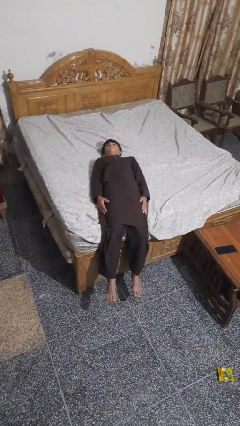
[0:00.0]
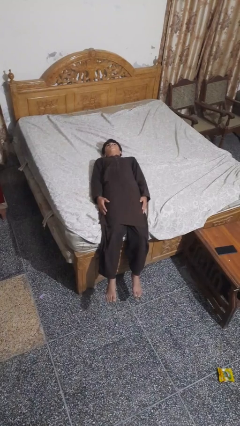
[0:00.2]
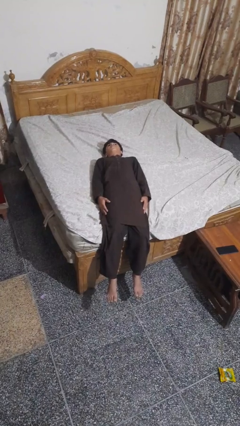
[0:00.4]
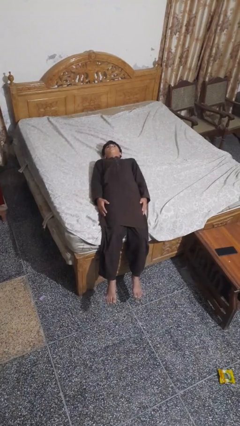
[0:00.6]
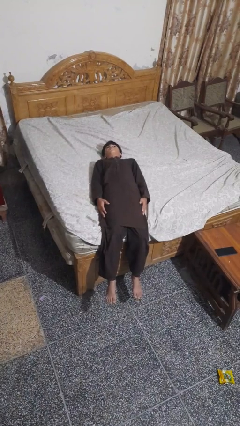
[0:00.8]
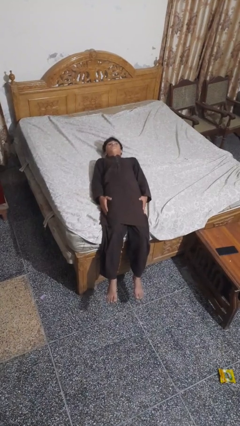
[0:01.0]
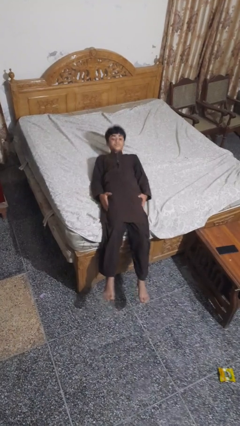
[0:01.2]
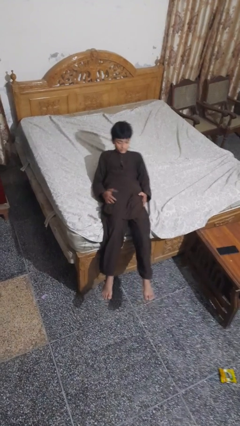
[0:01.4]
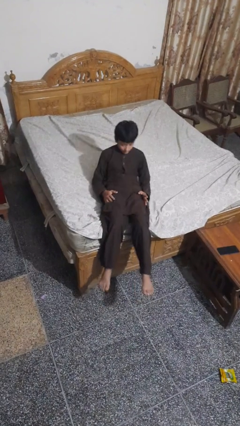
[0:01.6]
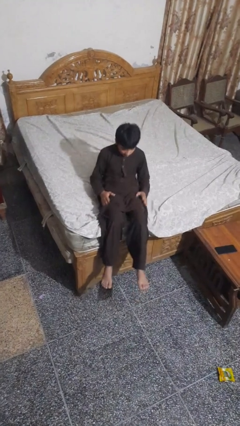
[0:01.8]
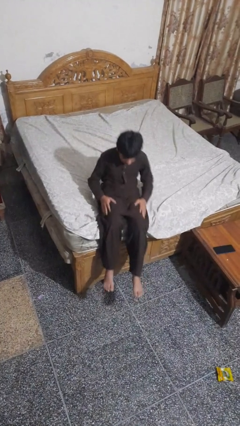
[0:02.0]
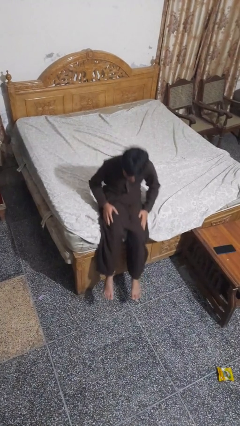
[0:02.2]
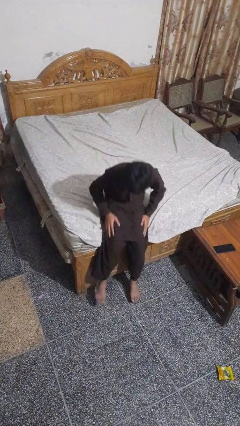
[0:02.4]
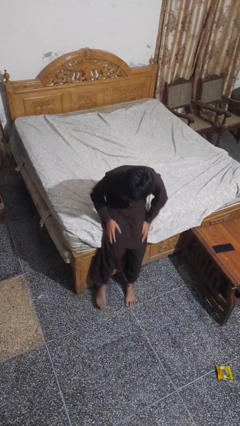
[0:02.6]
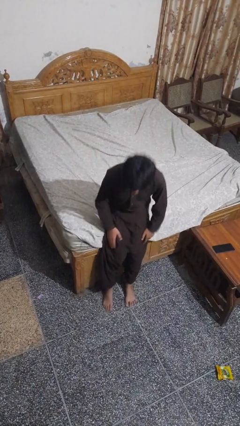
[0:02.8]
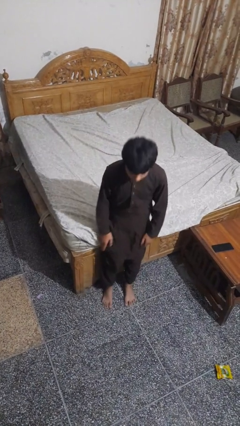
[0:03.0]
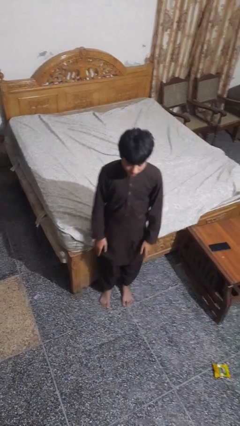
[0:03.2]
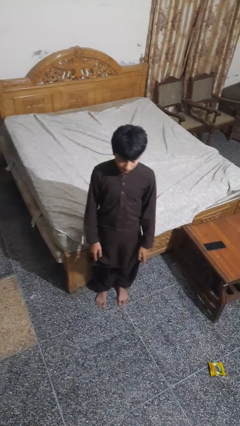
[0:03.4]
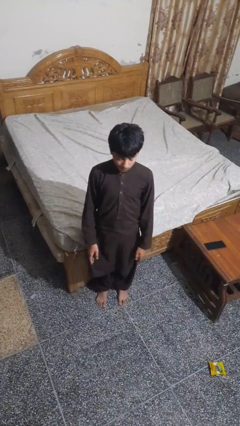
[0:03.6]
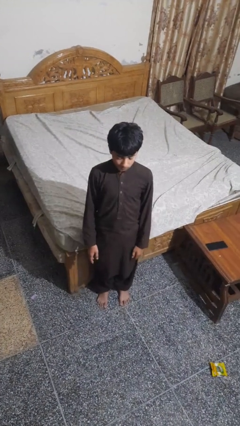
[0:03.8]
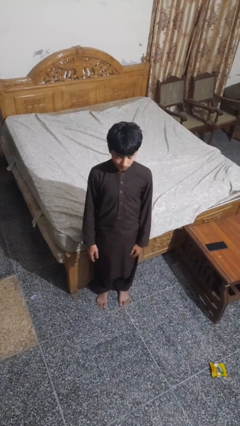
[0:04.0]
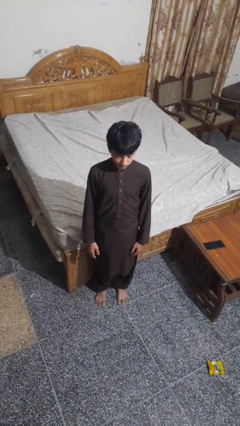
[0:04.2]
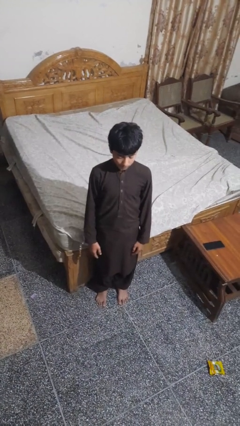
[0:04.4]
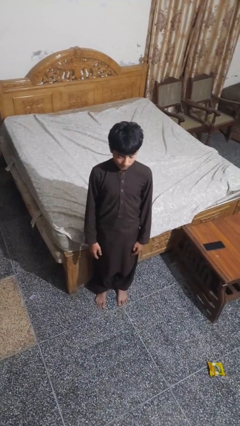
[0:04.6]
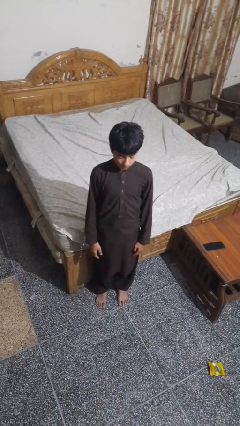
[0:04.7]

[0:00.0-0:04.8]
person stands up

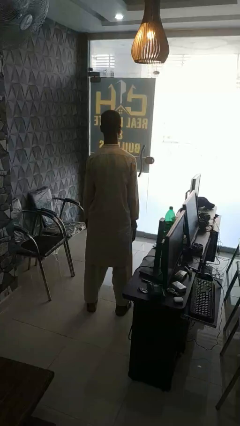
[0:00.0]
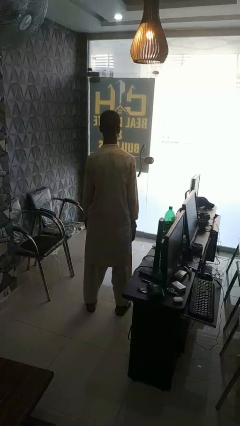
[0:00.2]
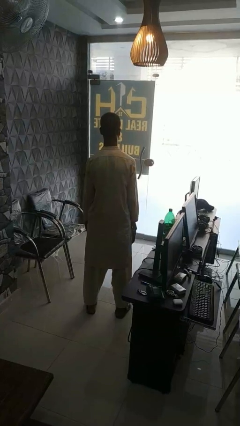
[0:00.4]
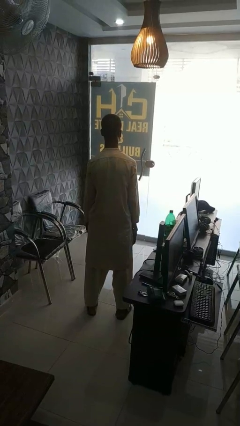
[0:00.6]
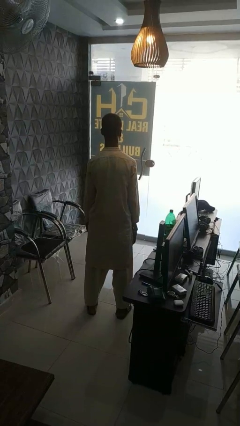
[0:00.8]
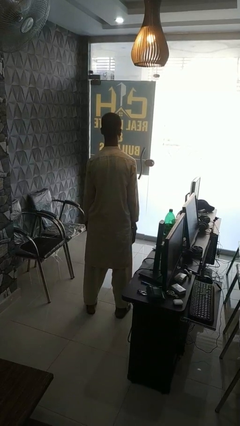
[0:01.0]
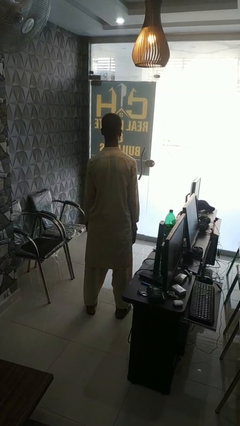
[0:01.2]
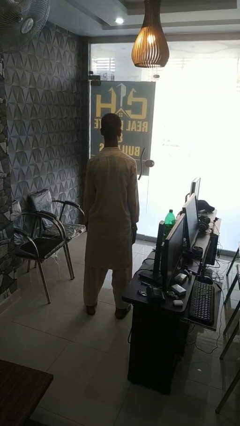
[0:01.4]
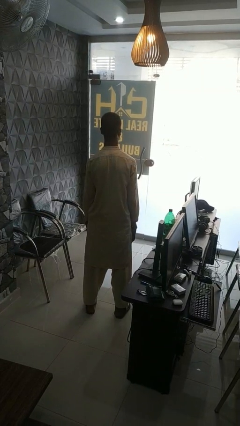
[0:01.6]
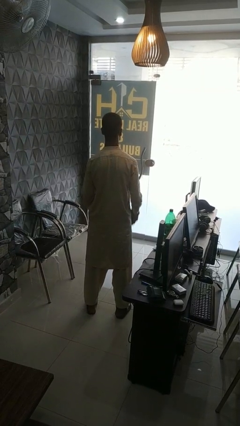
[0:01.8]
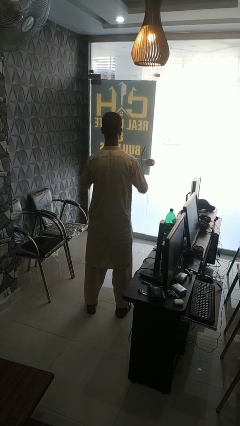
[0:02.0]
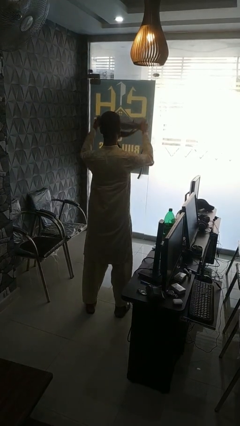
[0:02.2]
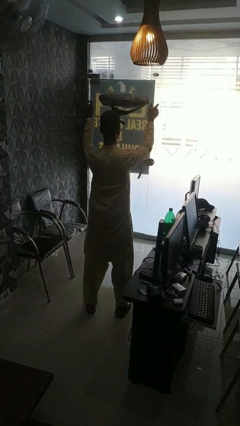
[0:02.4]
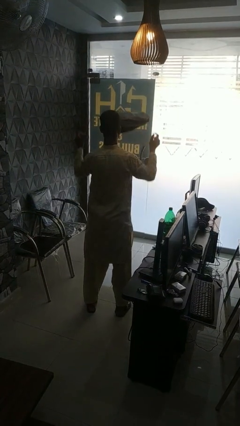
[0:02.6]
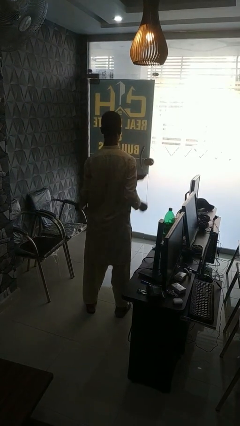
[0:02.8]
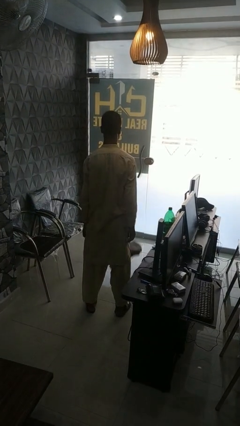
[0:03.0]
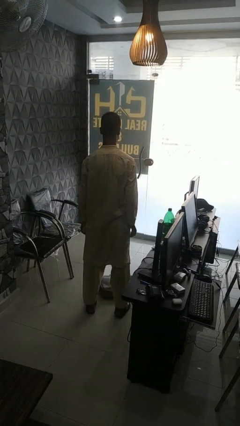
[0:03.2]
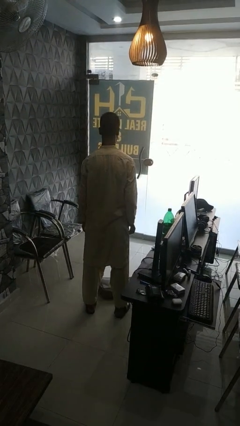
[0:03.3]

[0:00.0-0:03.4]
person throws object into air

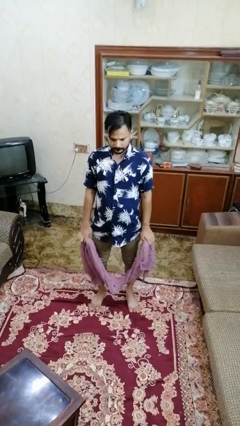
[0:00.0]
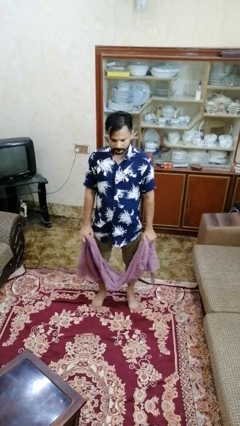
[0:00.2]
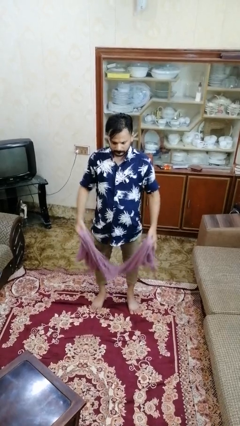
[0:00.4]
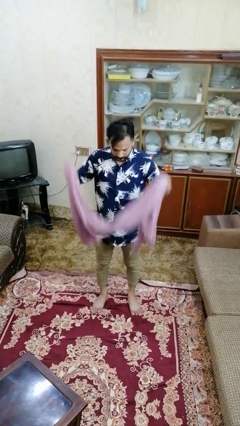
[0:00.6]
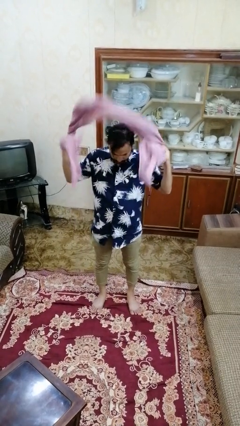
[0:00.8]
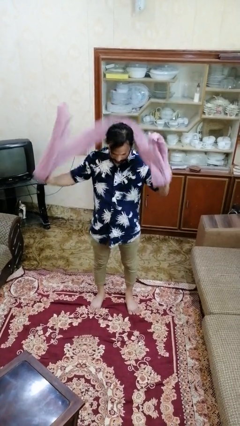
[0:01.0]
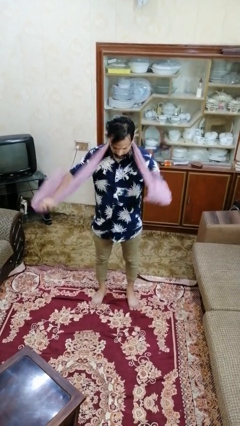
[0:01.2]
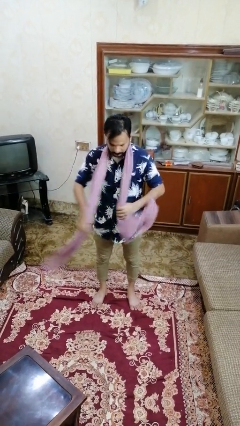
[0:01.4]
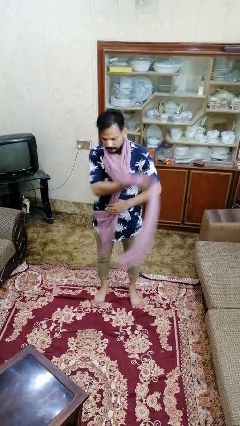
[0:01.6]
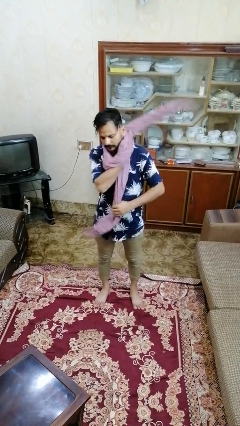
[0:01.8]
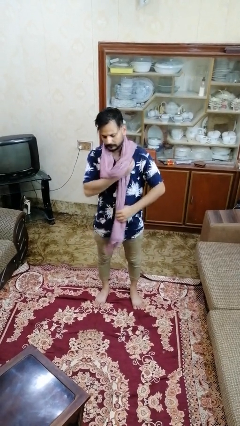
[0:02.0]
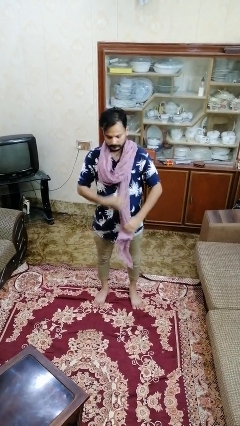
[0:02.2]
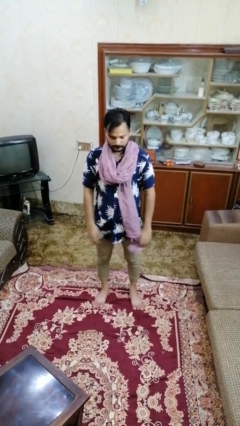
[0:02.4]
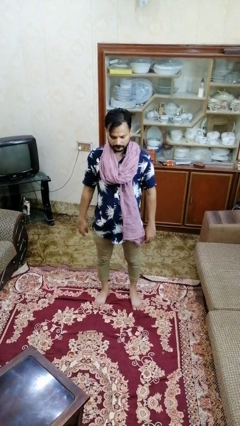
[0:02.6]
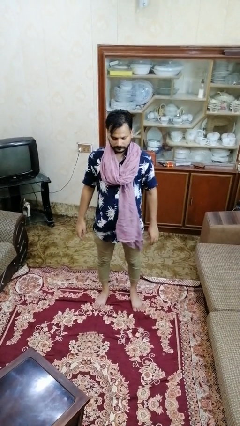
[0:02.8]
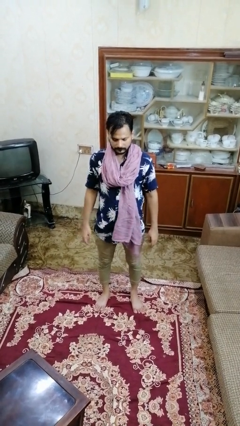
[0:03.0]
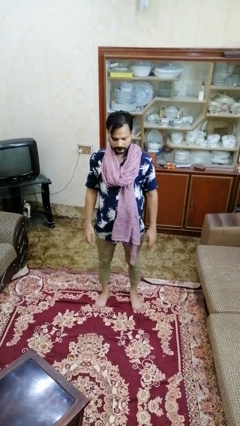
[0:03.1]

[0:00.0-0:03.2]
person puts on scarf

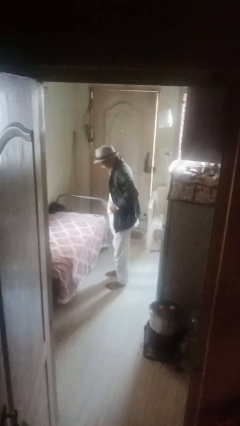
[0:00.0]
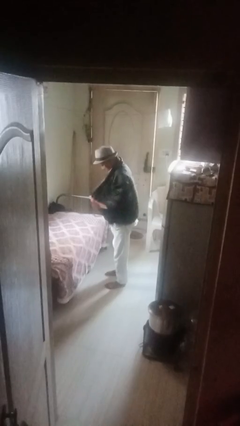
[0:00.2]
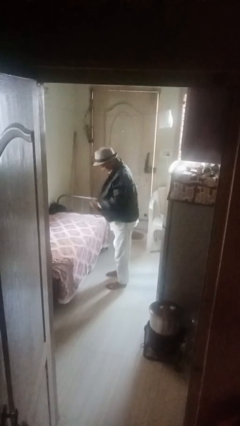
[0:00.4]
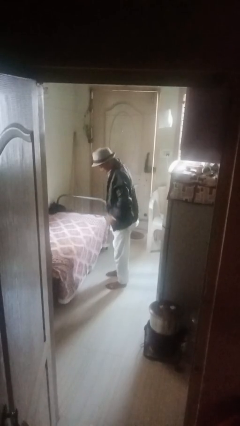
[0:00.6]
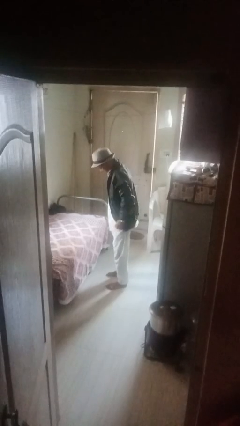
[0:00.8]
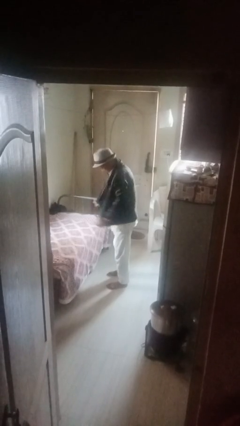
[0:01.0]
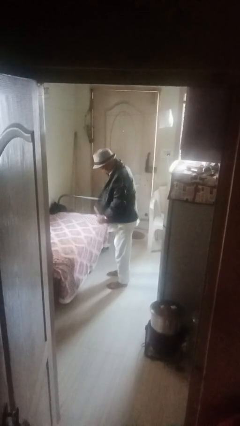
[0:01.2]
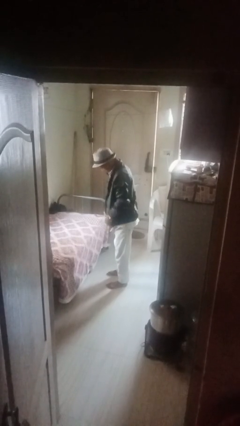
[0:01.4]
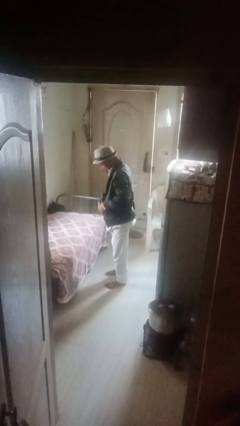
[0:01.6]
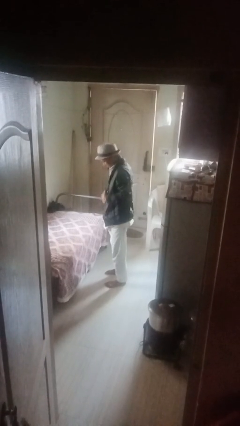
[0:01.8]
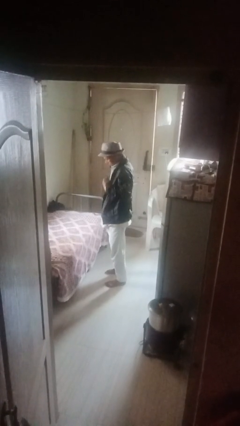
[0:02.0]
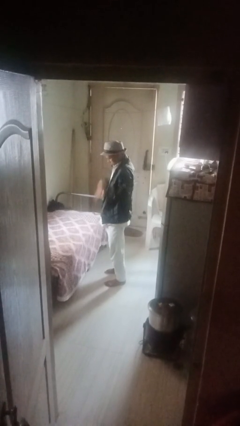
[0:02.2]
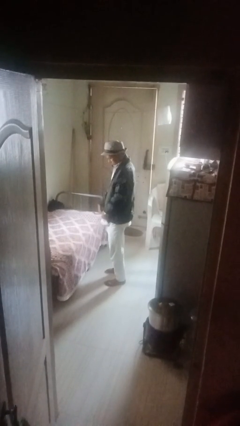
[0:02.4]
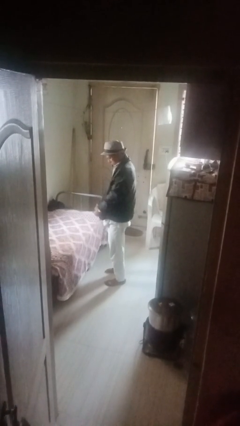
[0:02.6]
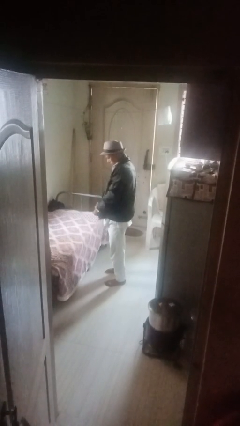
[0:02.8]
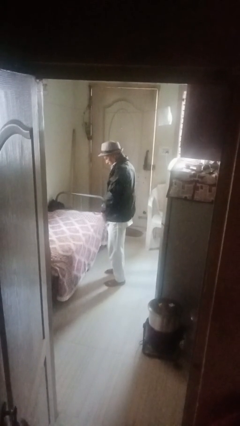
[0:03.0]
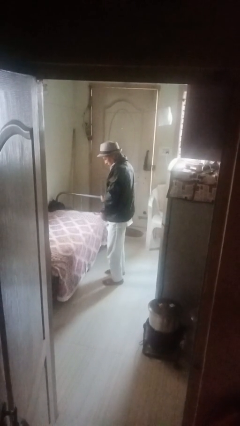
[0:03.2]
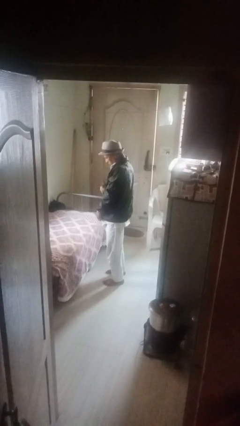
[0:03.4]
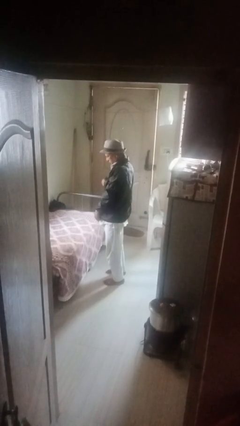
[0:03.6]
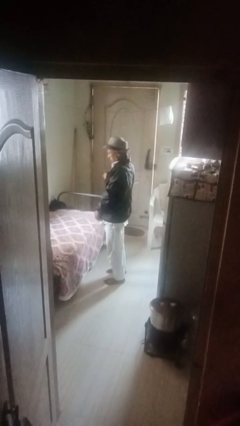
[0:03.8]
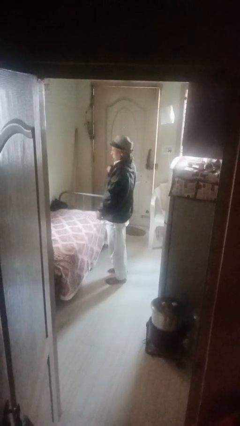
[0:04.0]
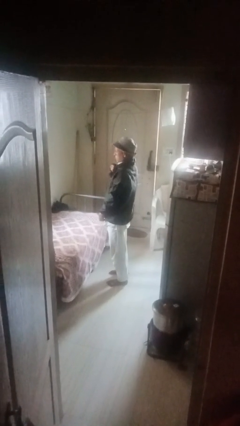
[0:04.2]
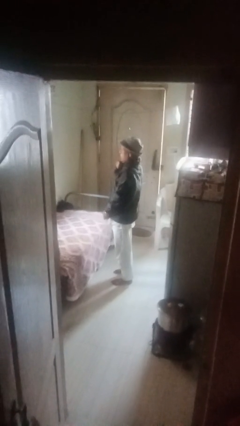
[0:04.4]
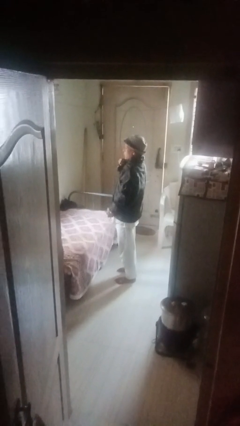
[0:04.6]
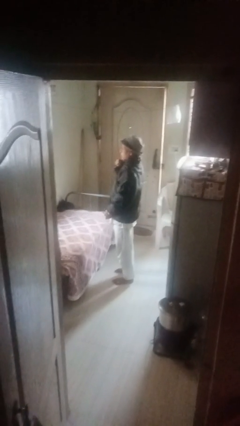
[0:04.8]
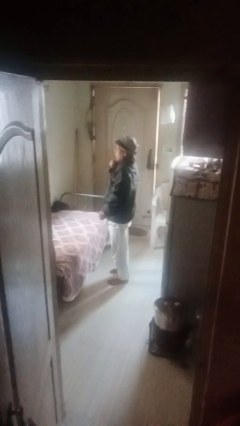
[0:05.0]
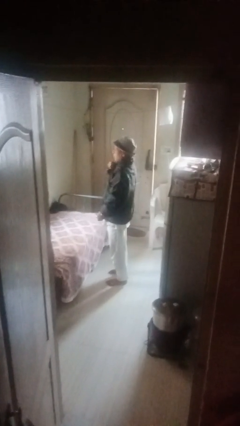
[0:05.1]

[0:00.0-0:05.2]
person zips up jacket

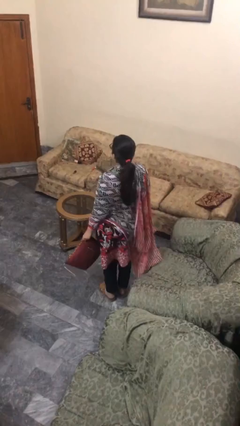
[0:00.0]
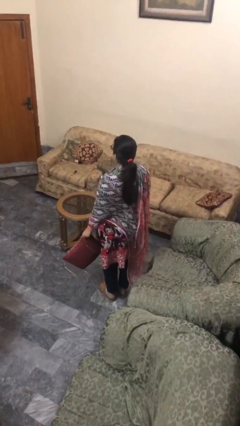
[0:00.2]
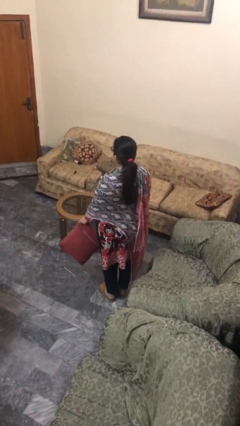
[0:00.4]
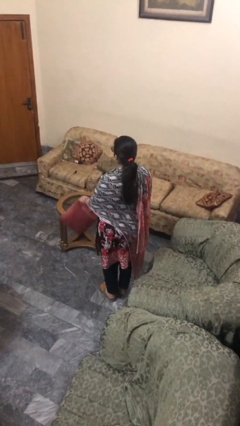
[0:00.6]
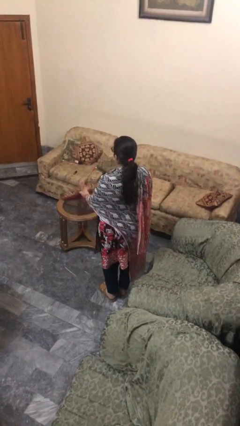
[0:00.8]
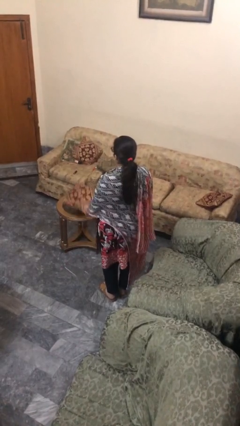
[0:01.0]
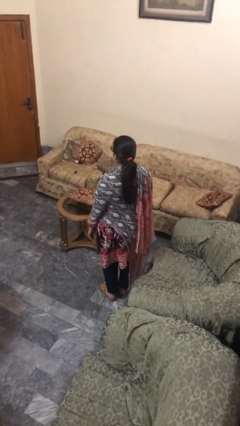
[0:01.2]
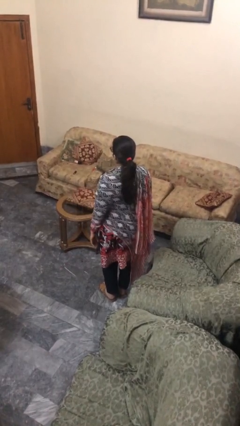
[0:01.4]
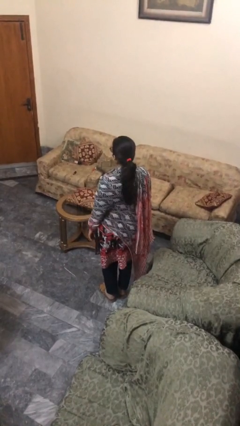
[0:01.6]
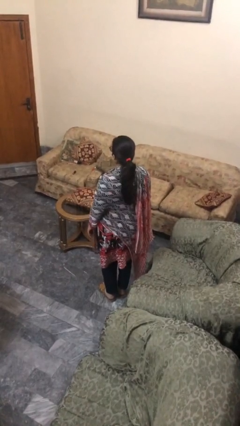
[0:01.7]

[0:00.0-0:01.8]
person throws object on table
